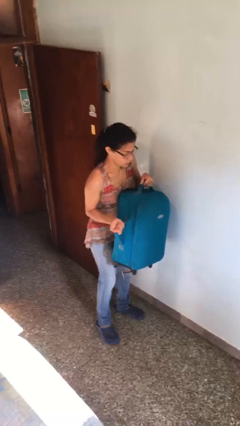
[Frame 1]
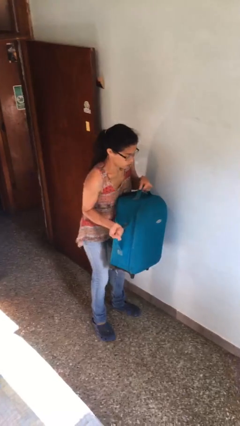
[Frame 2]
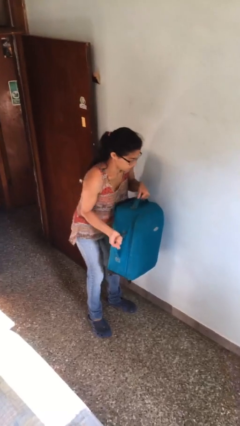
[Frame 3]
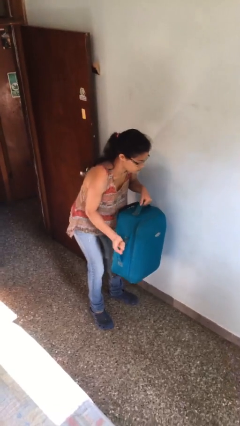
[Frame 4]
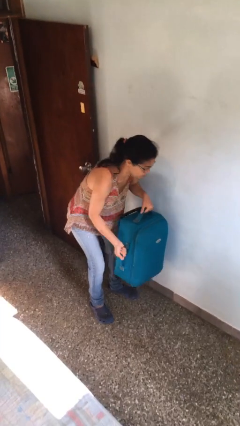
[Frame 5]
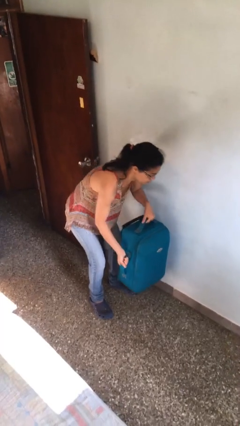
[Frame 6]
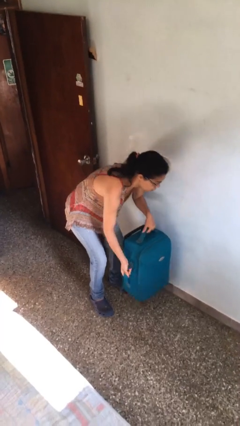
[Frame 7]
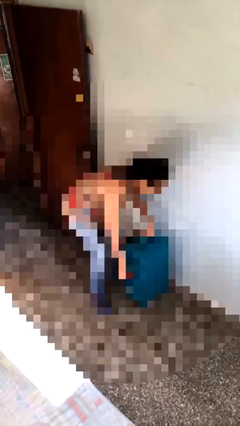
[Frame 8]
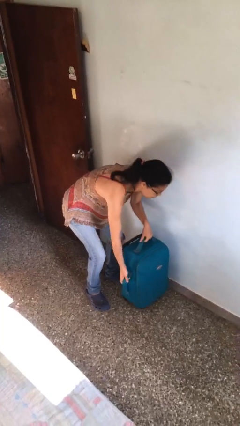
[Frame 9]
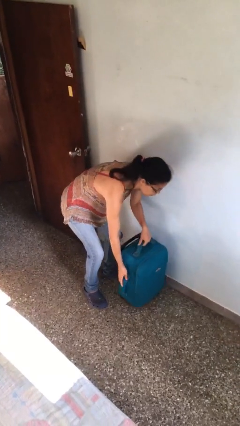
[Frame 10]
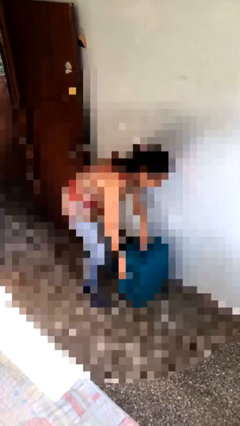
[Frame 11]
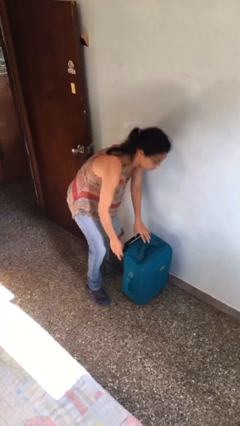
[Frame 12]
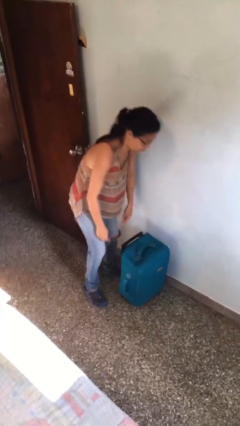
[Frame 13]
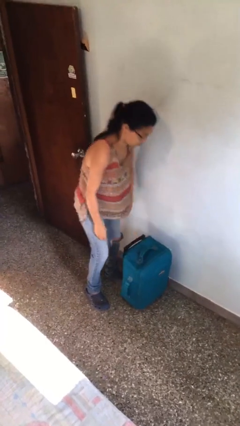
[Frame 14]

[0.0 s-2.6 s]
person puts down object on floor

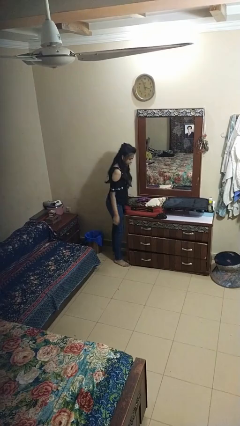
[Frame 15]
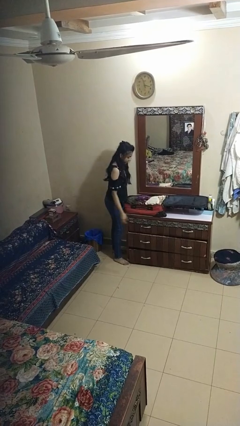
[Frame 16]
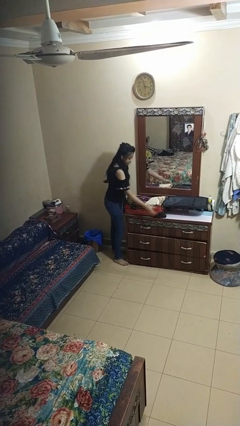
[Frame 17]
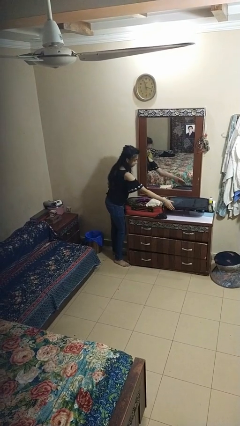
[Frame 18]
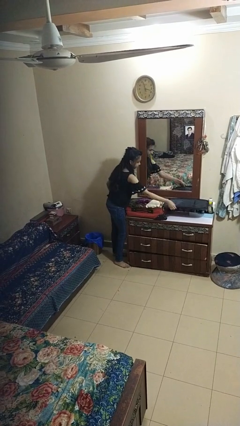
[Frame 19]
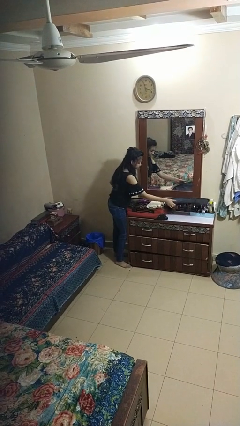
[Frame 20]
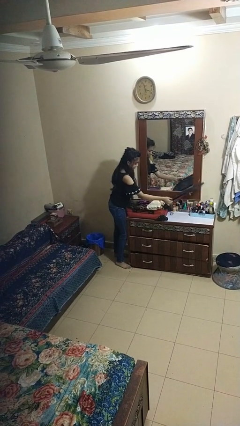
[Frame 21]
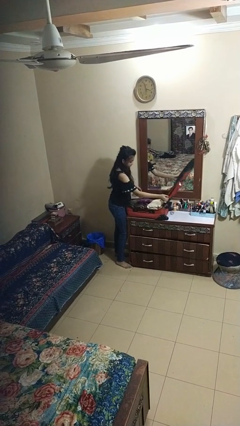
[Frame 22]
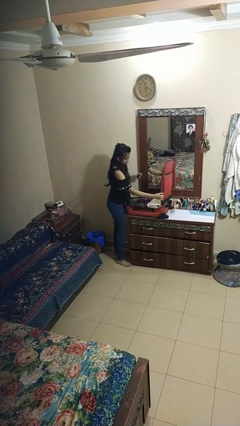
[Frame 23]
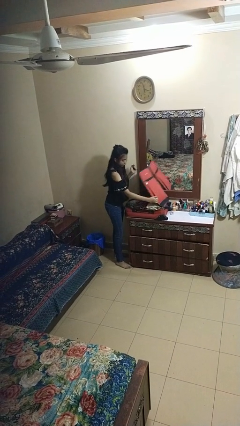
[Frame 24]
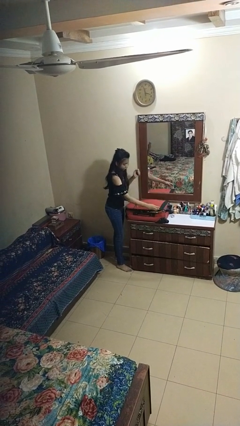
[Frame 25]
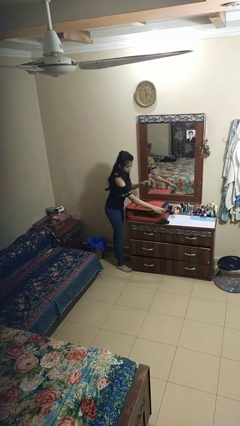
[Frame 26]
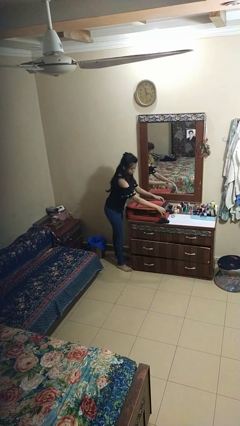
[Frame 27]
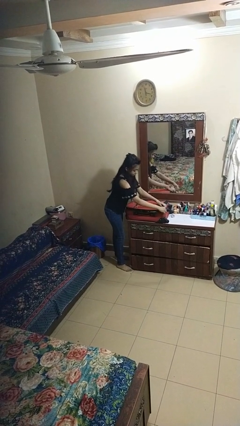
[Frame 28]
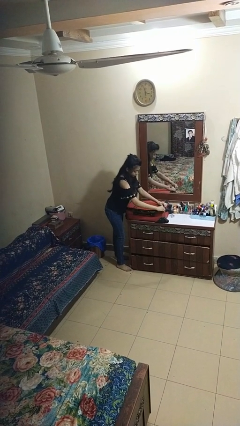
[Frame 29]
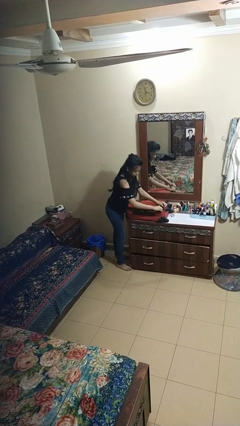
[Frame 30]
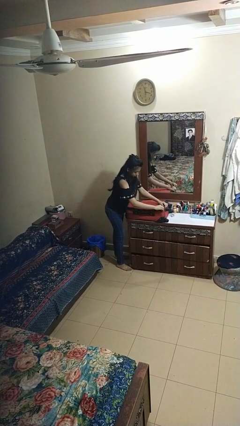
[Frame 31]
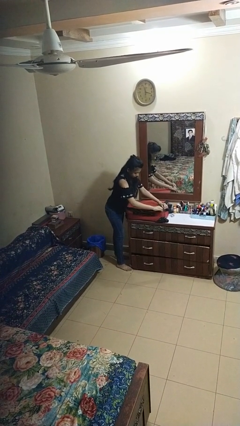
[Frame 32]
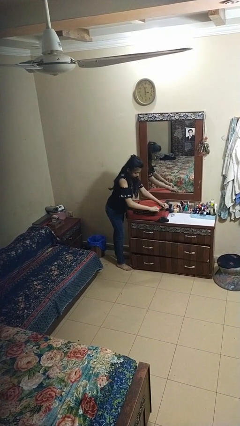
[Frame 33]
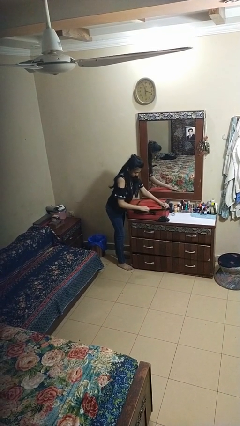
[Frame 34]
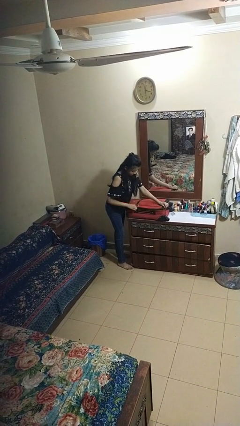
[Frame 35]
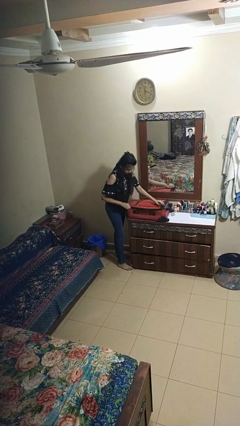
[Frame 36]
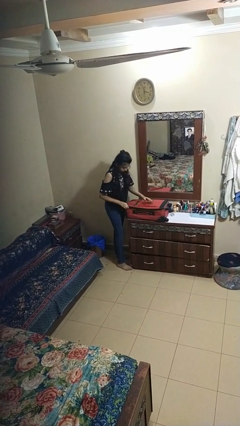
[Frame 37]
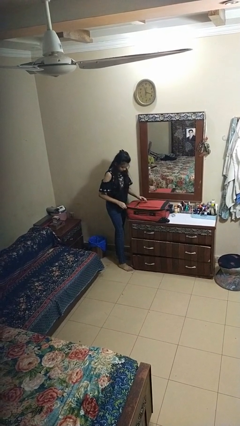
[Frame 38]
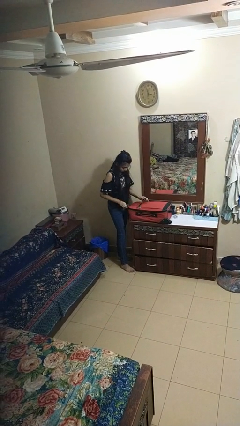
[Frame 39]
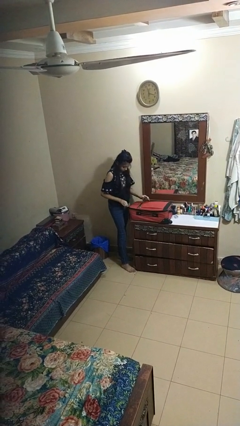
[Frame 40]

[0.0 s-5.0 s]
person closes suitcase

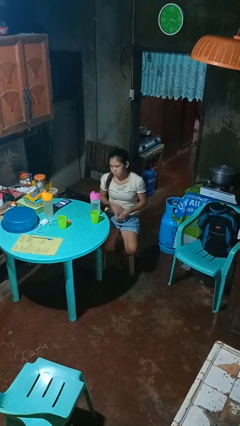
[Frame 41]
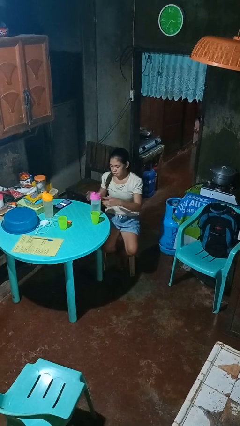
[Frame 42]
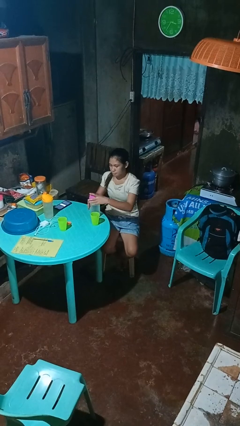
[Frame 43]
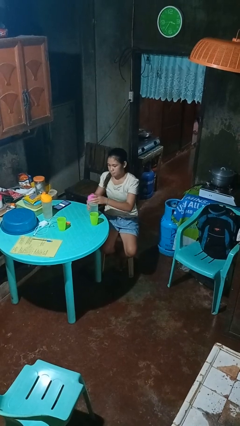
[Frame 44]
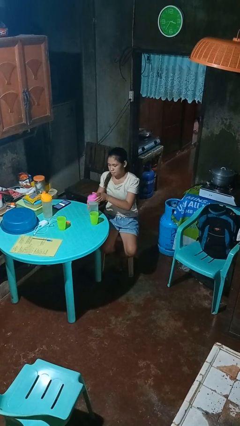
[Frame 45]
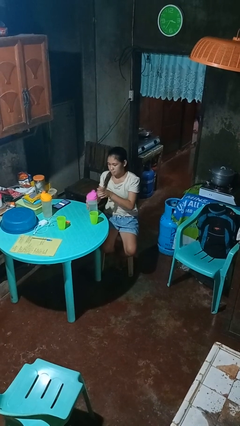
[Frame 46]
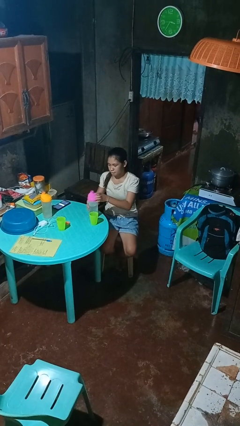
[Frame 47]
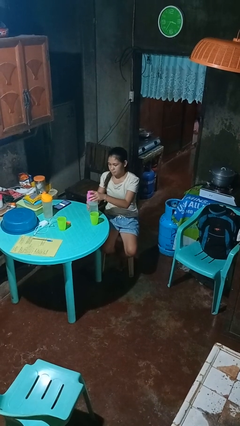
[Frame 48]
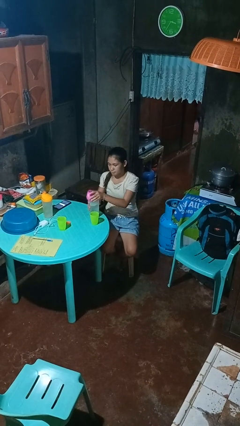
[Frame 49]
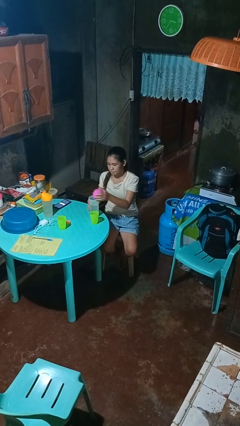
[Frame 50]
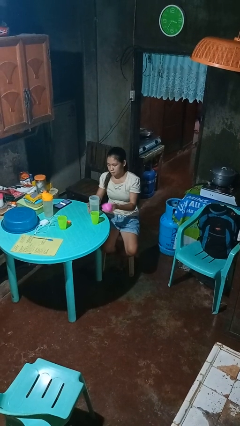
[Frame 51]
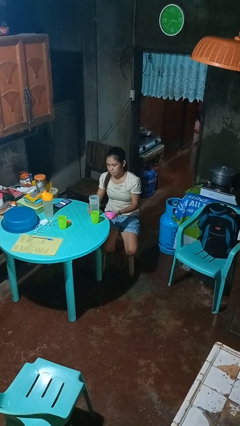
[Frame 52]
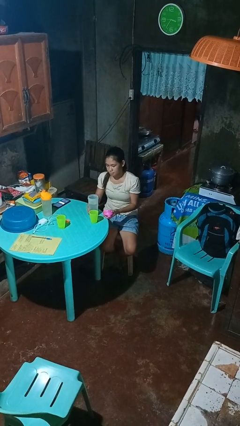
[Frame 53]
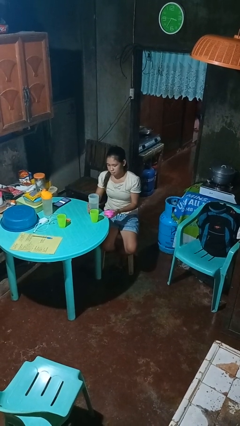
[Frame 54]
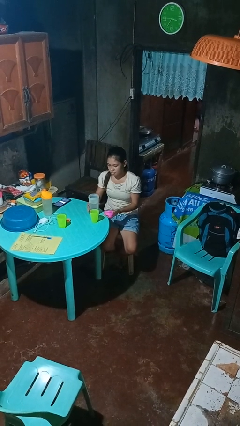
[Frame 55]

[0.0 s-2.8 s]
person unscrews lid from bottle

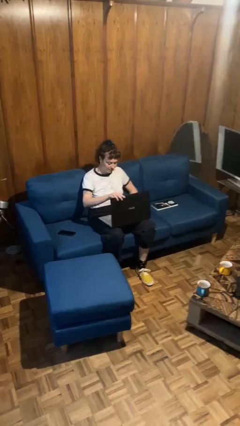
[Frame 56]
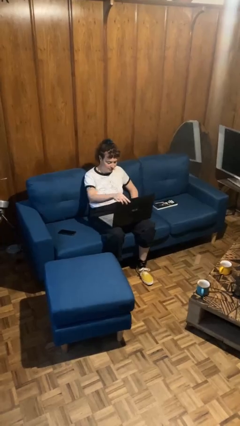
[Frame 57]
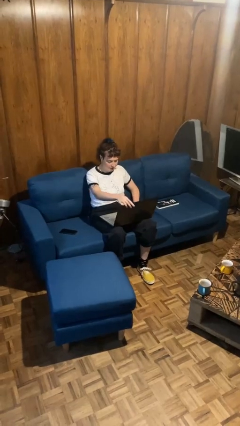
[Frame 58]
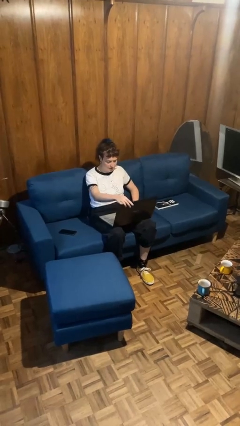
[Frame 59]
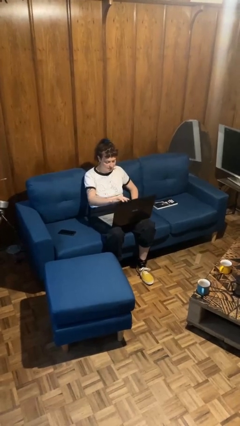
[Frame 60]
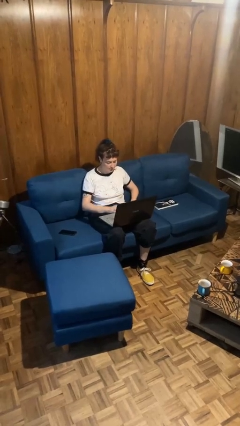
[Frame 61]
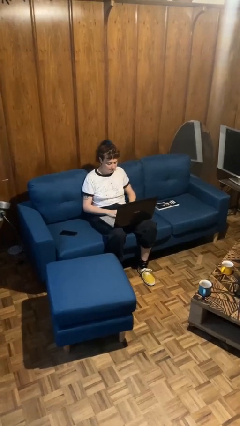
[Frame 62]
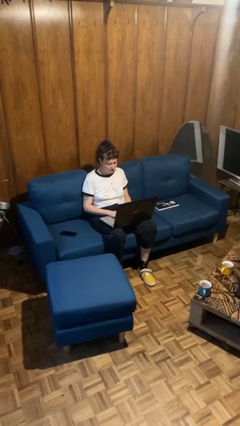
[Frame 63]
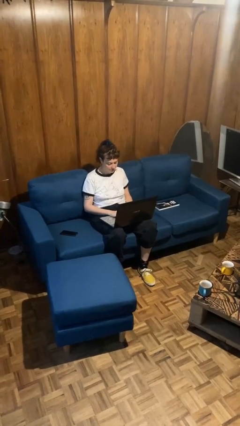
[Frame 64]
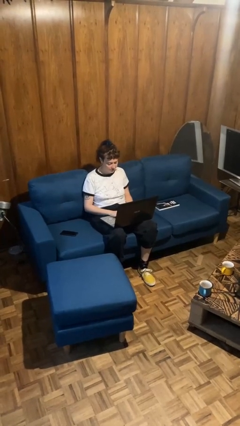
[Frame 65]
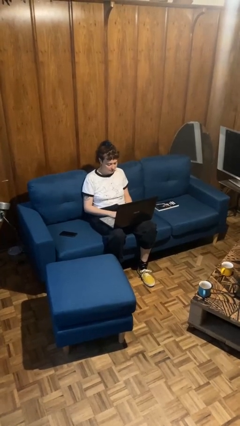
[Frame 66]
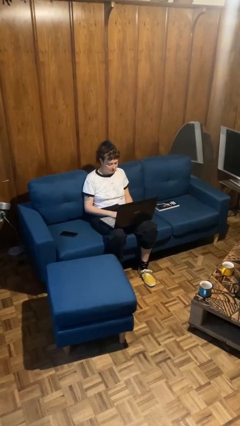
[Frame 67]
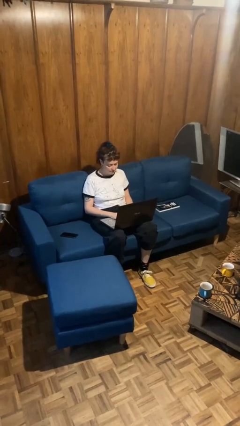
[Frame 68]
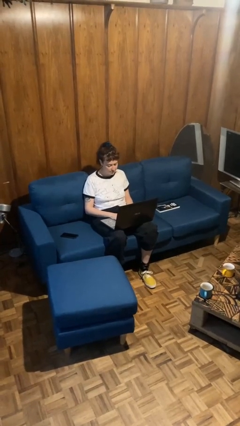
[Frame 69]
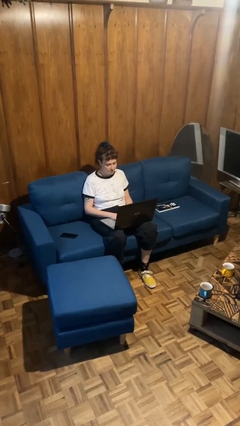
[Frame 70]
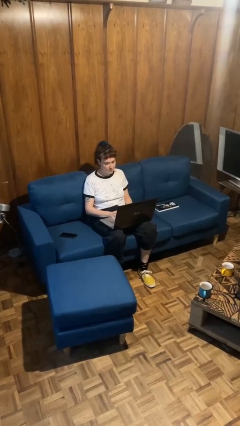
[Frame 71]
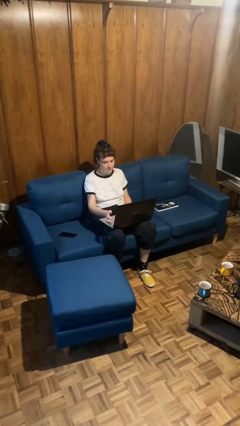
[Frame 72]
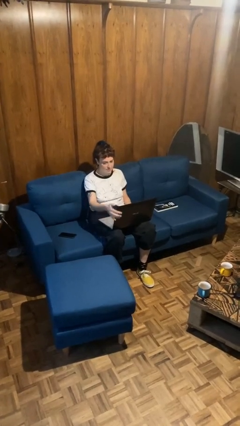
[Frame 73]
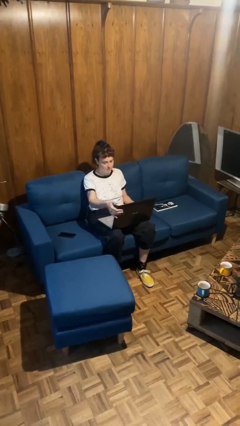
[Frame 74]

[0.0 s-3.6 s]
person interacts with laptop

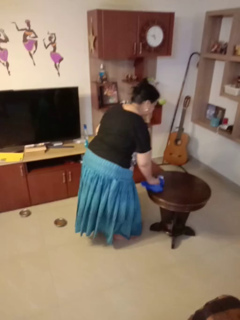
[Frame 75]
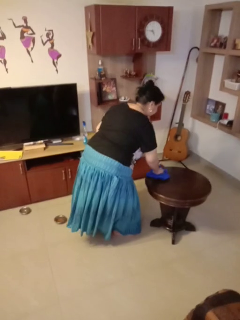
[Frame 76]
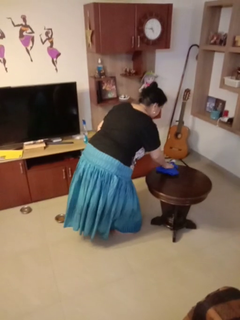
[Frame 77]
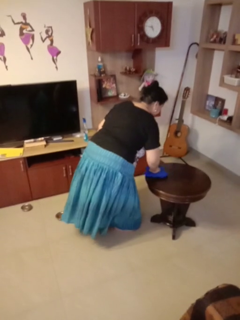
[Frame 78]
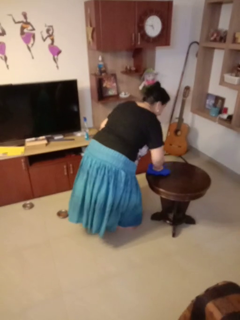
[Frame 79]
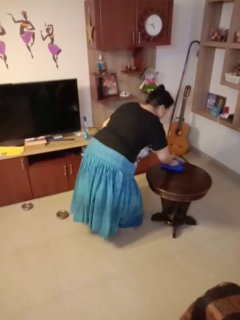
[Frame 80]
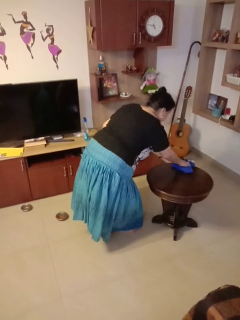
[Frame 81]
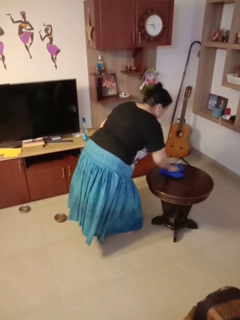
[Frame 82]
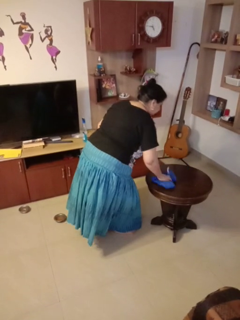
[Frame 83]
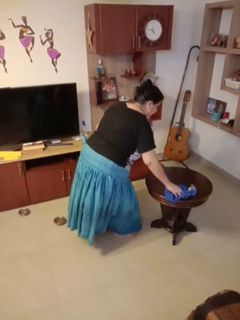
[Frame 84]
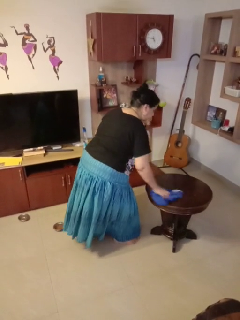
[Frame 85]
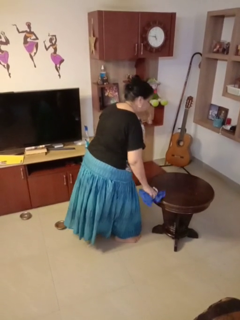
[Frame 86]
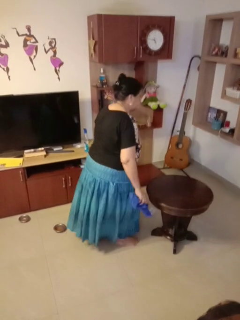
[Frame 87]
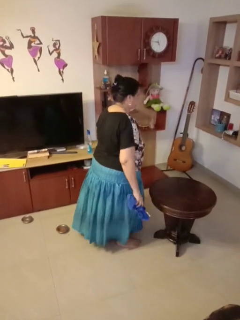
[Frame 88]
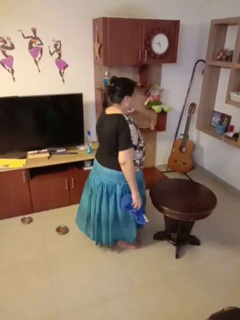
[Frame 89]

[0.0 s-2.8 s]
person cleans table with rag

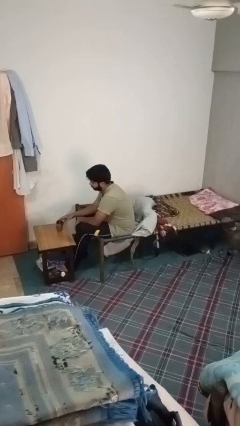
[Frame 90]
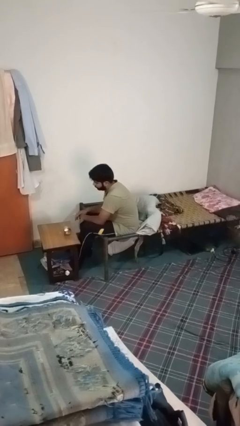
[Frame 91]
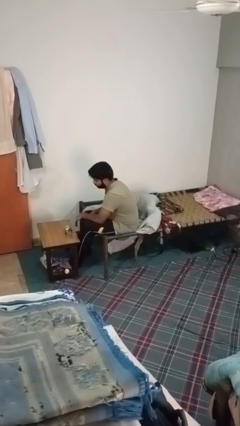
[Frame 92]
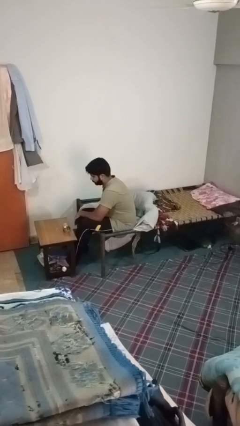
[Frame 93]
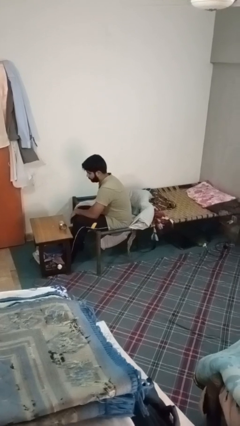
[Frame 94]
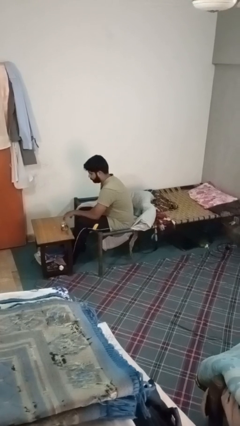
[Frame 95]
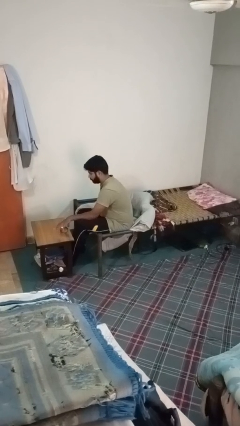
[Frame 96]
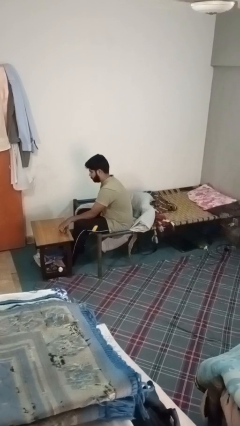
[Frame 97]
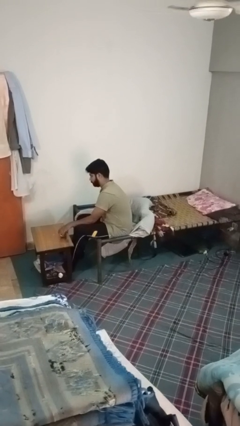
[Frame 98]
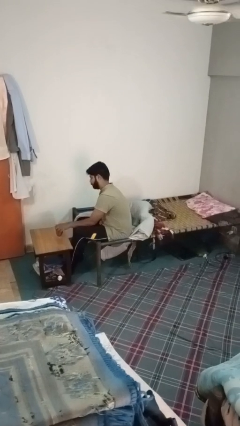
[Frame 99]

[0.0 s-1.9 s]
person knocks over glass
